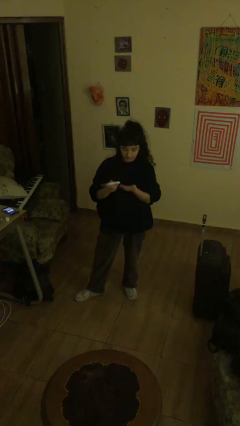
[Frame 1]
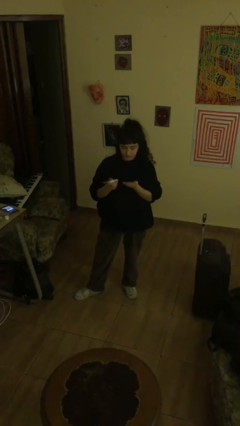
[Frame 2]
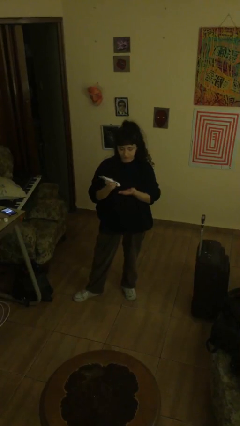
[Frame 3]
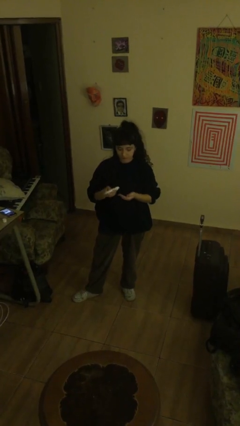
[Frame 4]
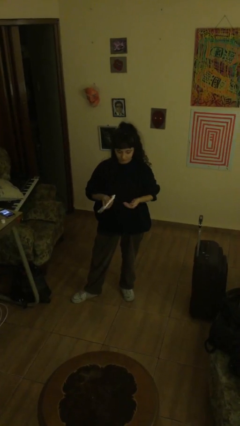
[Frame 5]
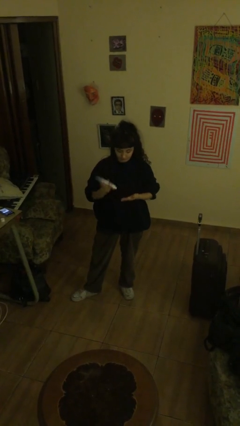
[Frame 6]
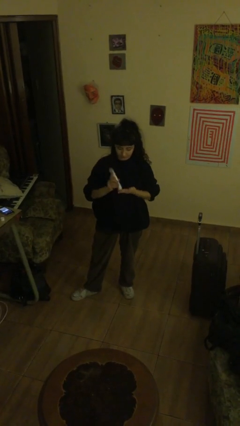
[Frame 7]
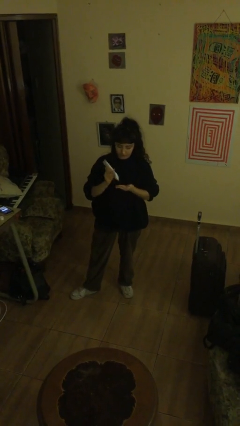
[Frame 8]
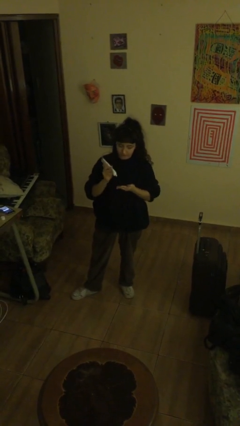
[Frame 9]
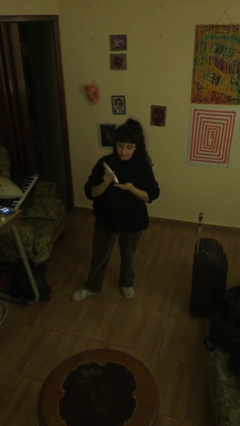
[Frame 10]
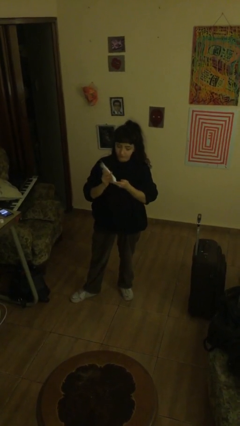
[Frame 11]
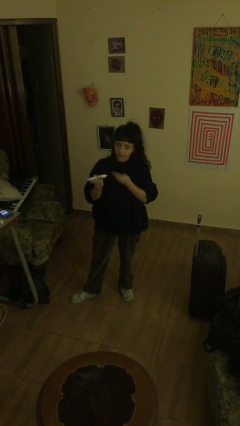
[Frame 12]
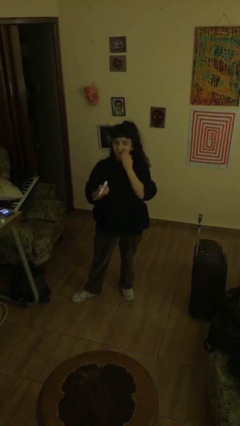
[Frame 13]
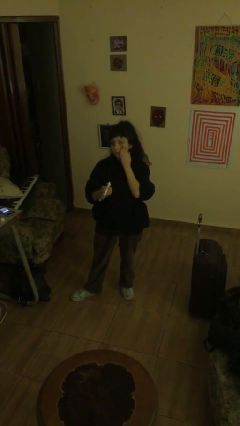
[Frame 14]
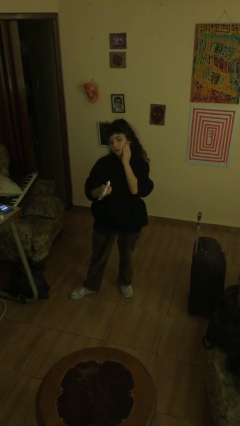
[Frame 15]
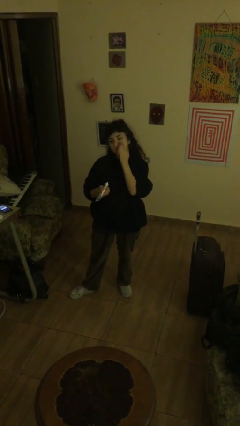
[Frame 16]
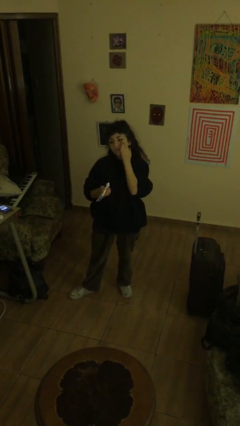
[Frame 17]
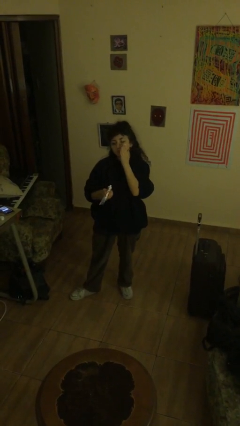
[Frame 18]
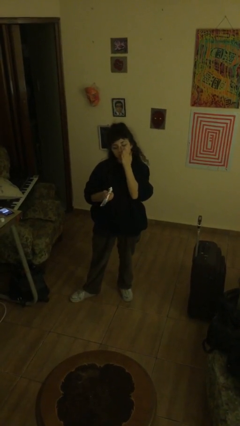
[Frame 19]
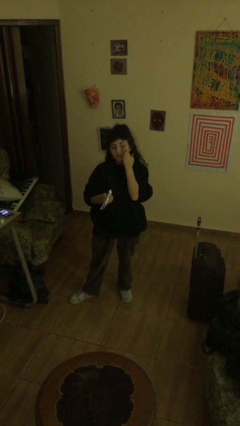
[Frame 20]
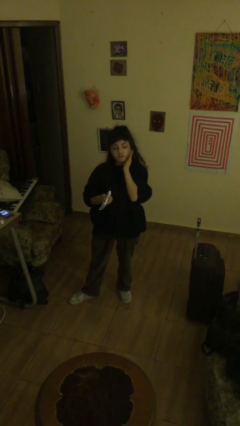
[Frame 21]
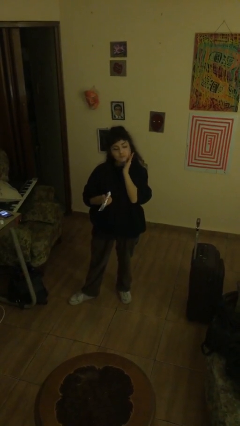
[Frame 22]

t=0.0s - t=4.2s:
person applies sunscreen

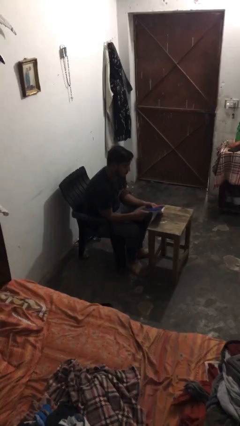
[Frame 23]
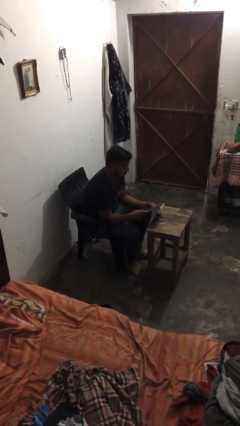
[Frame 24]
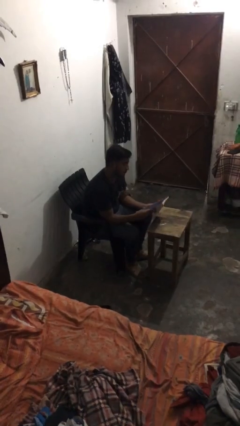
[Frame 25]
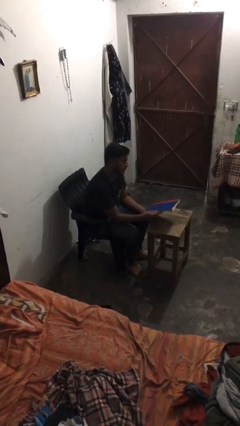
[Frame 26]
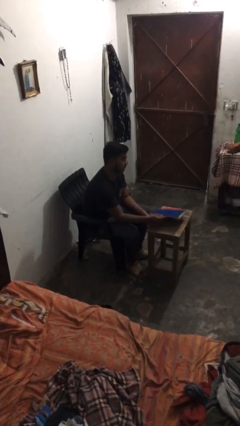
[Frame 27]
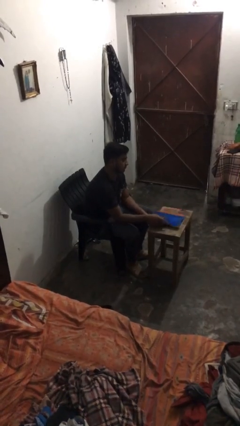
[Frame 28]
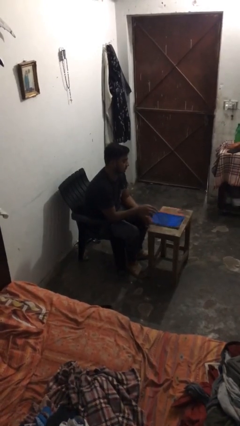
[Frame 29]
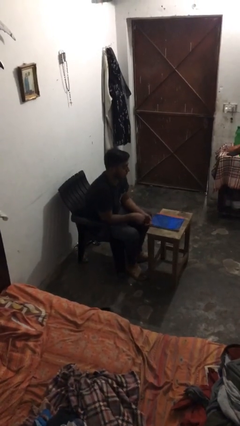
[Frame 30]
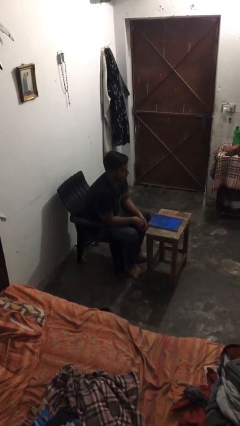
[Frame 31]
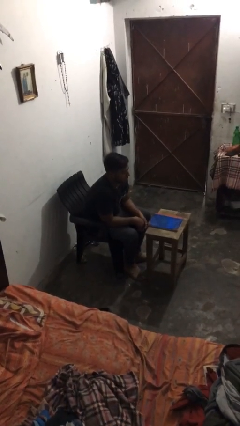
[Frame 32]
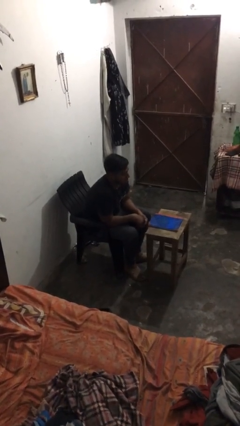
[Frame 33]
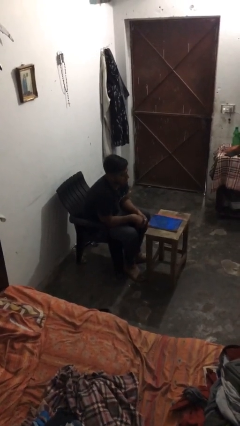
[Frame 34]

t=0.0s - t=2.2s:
person puts down object on table

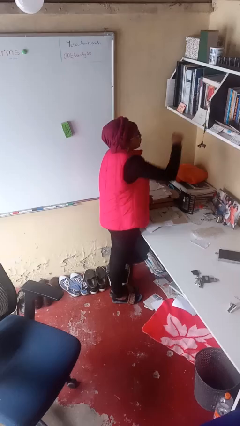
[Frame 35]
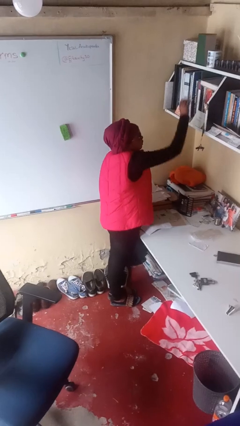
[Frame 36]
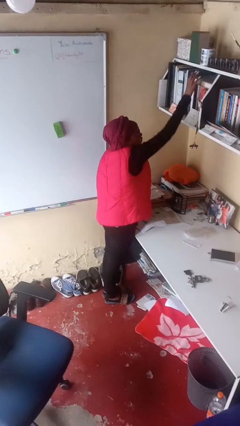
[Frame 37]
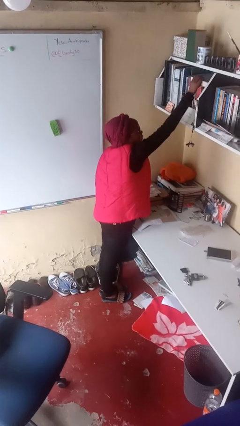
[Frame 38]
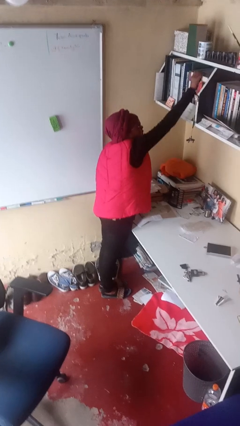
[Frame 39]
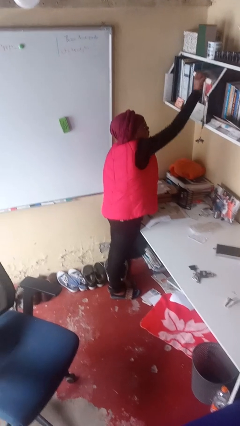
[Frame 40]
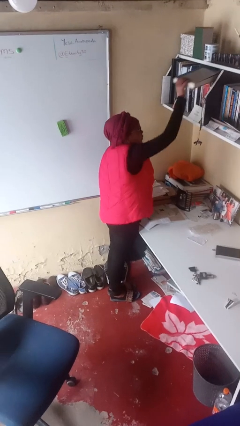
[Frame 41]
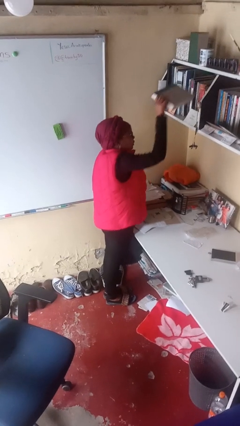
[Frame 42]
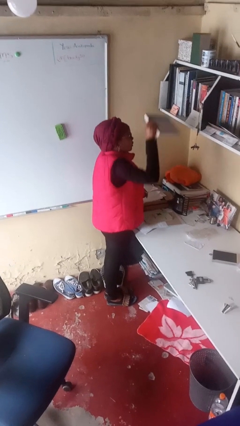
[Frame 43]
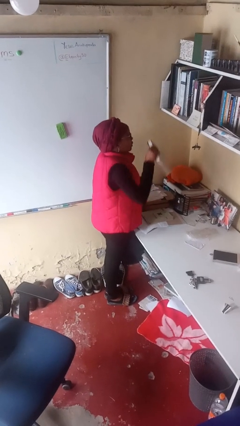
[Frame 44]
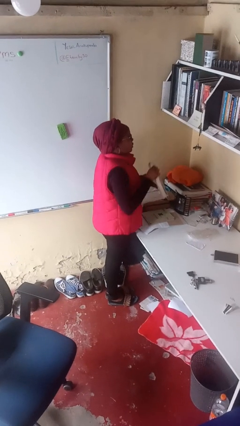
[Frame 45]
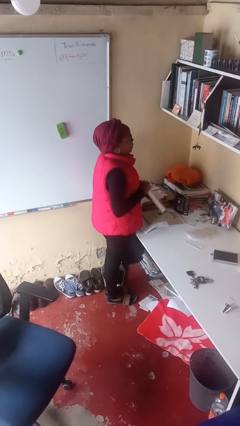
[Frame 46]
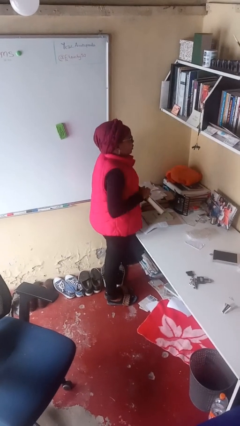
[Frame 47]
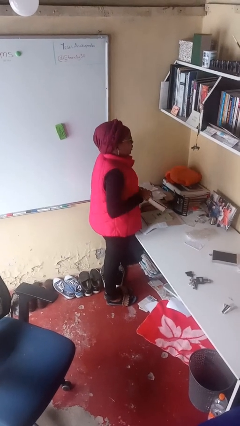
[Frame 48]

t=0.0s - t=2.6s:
person picks up object from shelf

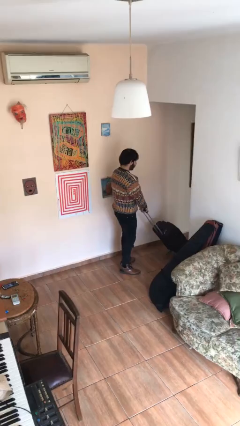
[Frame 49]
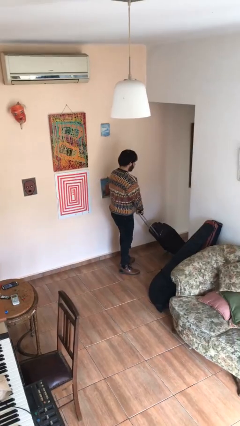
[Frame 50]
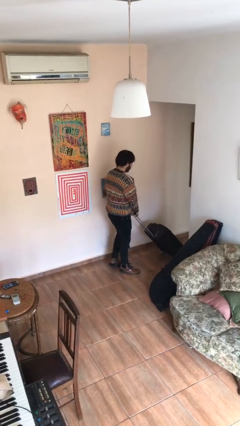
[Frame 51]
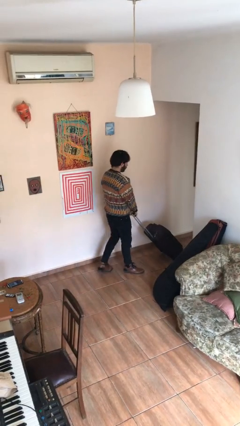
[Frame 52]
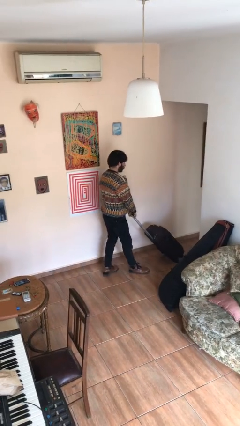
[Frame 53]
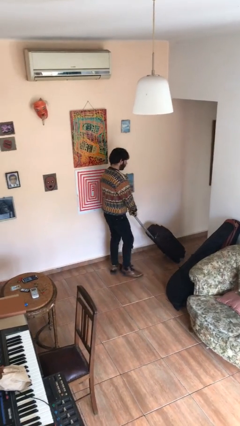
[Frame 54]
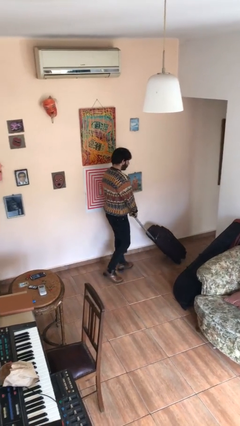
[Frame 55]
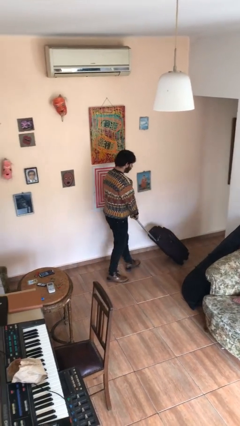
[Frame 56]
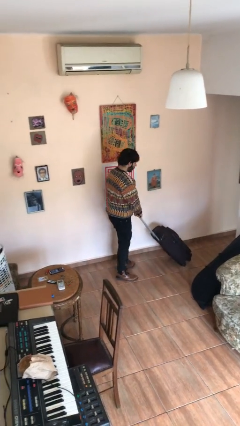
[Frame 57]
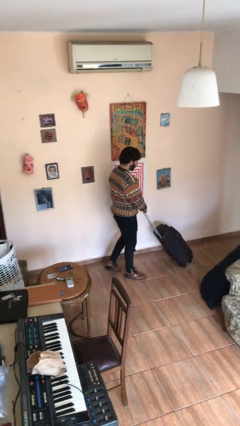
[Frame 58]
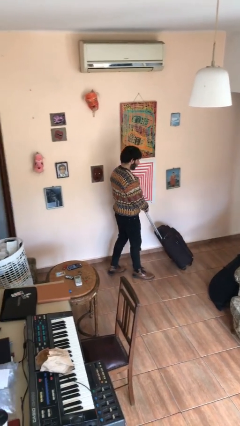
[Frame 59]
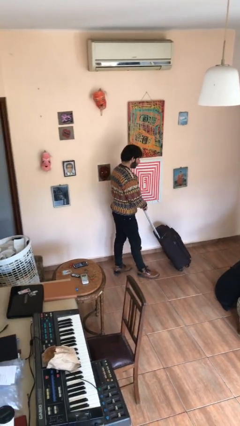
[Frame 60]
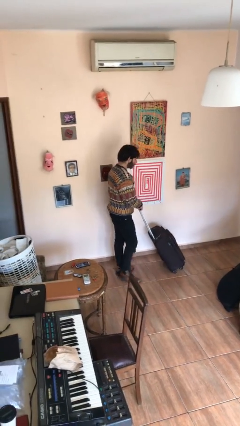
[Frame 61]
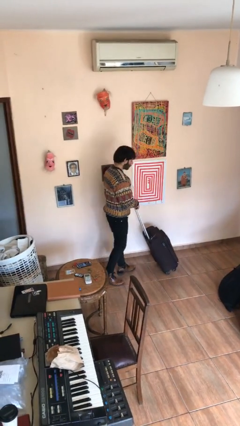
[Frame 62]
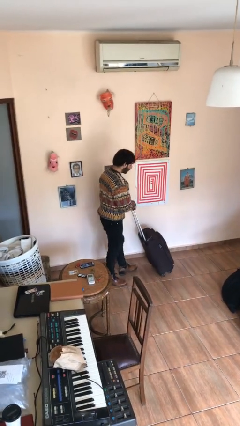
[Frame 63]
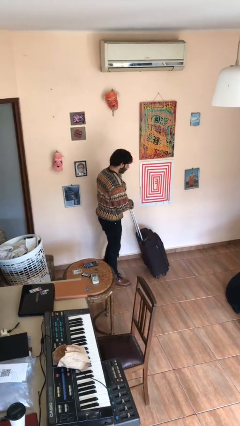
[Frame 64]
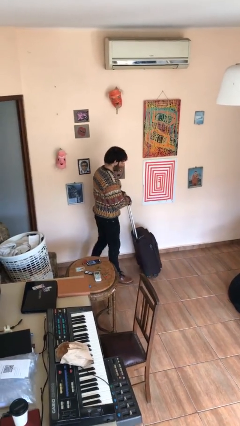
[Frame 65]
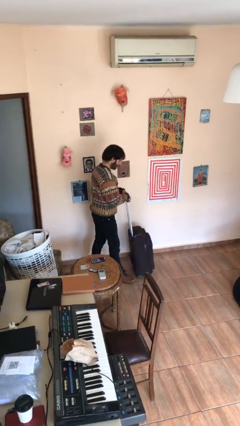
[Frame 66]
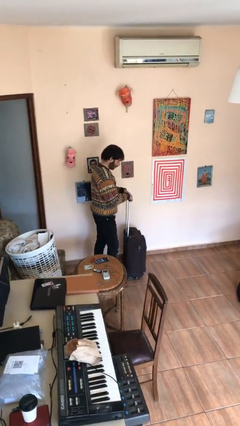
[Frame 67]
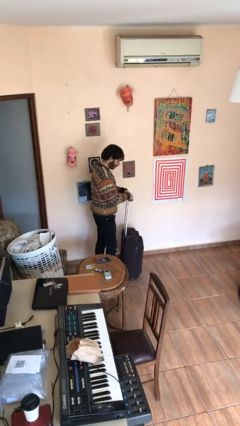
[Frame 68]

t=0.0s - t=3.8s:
person pulls wheeled cart

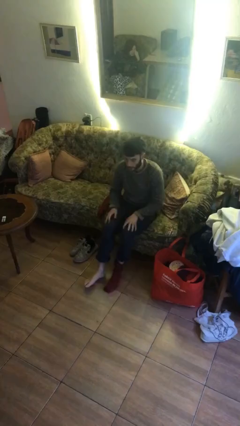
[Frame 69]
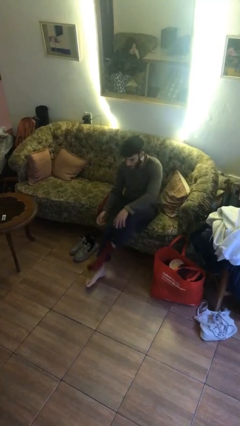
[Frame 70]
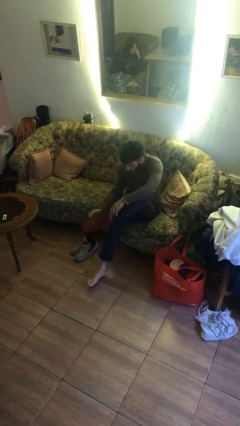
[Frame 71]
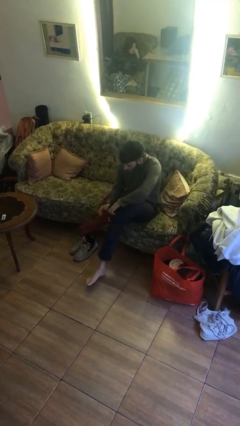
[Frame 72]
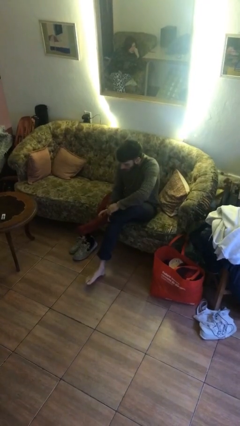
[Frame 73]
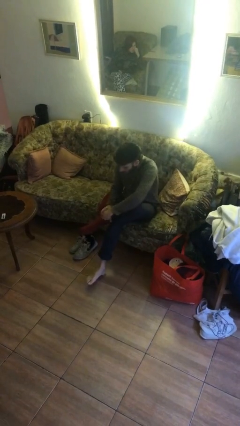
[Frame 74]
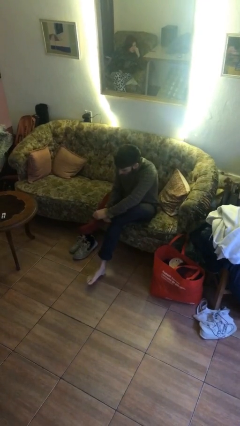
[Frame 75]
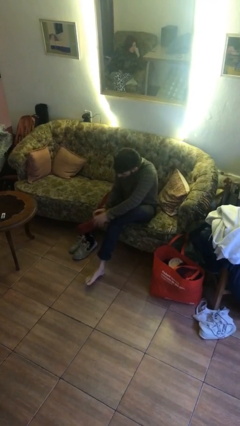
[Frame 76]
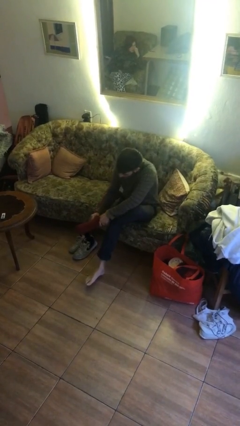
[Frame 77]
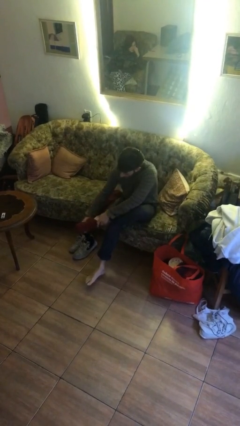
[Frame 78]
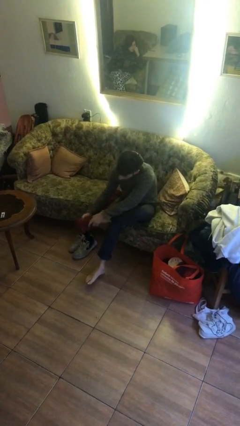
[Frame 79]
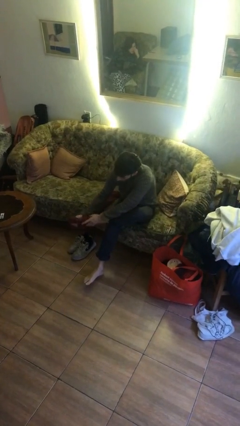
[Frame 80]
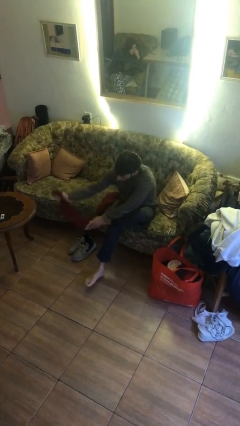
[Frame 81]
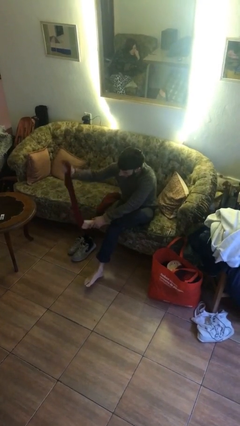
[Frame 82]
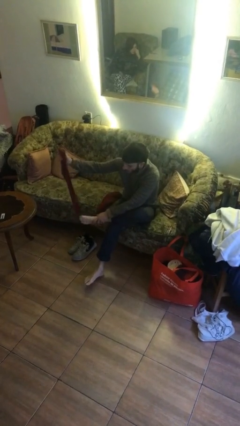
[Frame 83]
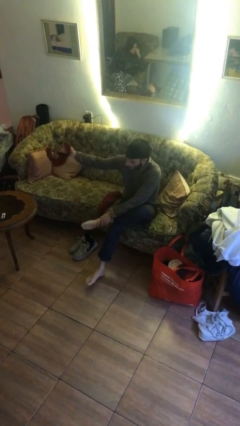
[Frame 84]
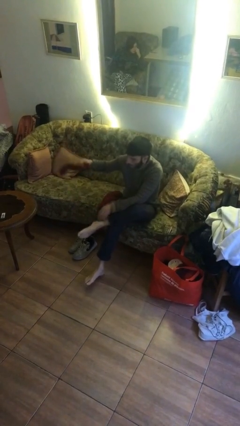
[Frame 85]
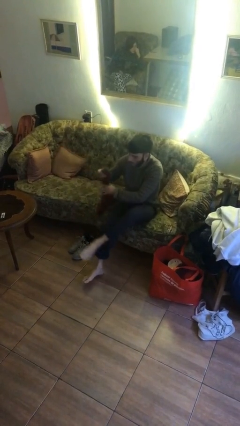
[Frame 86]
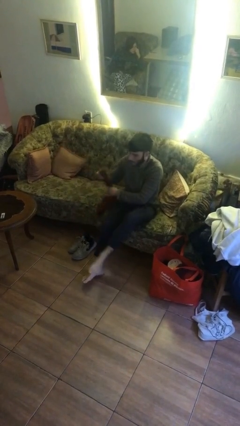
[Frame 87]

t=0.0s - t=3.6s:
person takes off socks

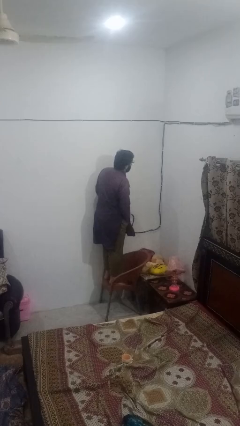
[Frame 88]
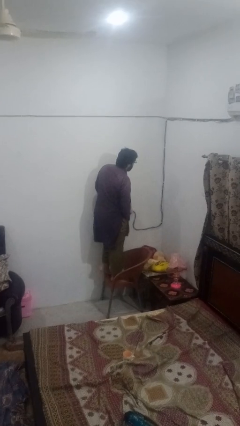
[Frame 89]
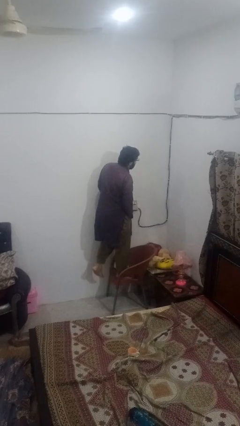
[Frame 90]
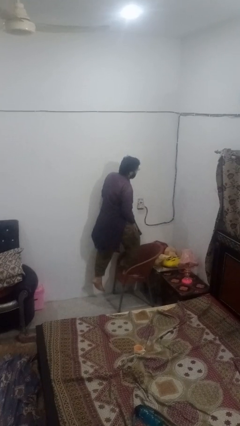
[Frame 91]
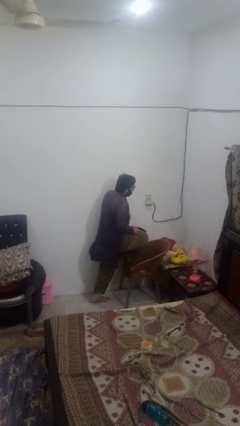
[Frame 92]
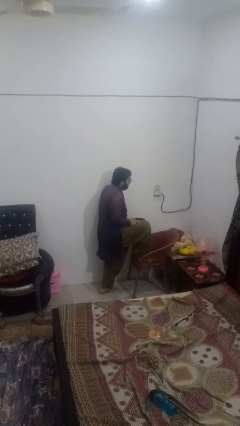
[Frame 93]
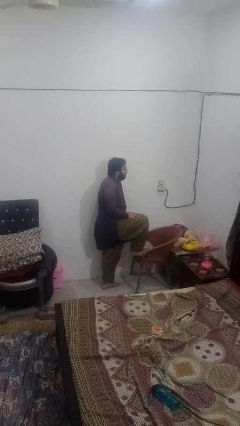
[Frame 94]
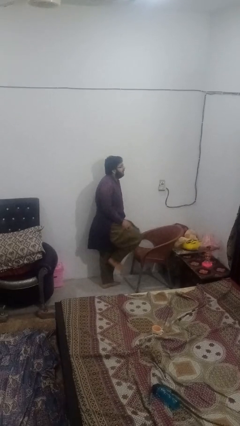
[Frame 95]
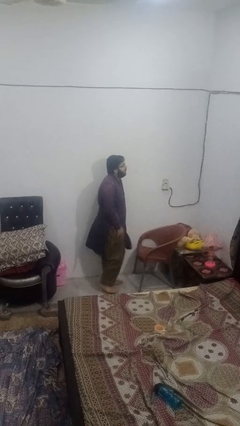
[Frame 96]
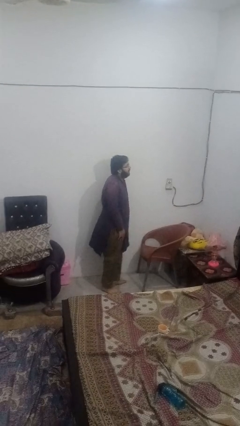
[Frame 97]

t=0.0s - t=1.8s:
person climbs off chair
